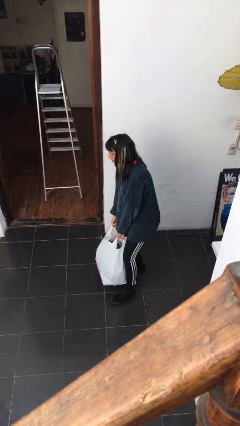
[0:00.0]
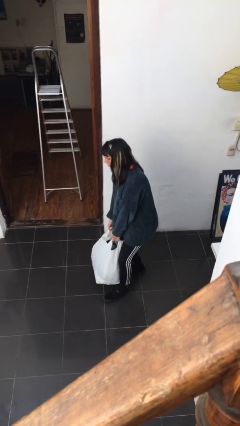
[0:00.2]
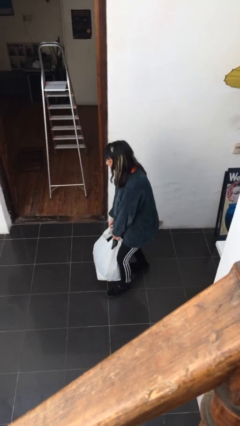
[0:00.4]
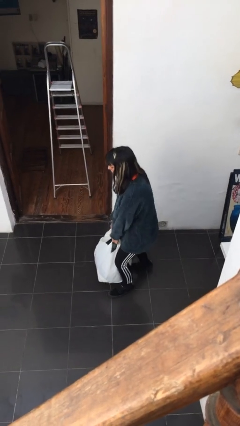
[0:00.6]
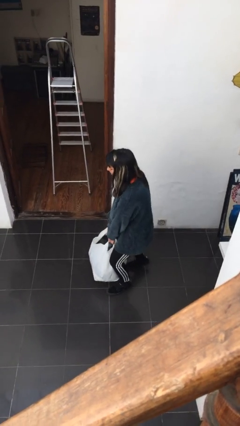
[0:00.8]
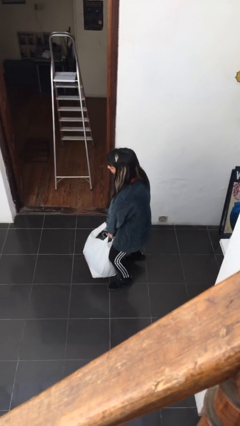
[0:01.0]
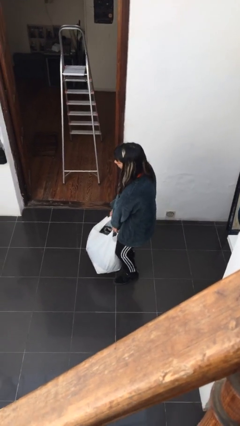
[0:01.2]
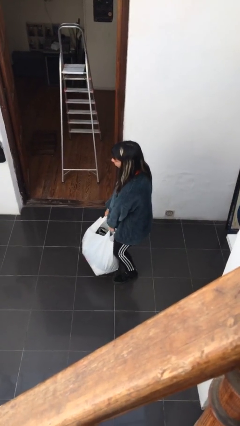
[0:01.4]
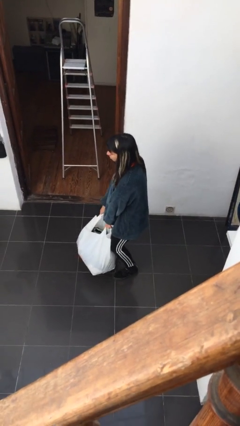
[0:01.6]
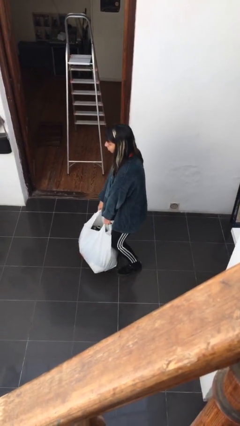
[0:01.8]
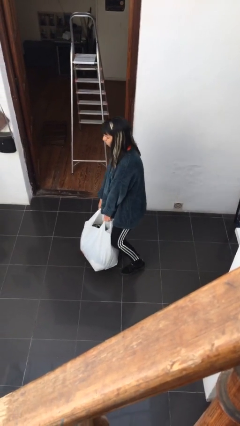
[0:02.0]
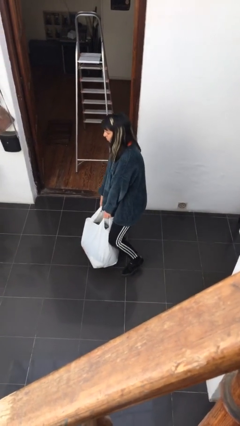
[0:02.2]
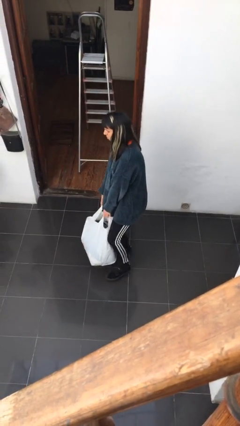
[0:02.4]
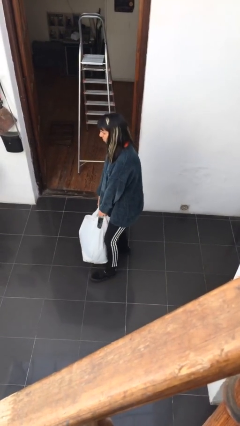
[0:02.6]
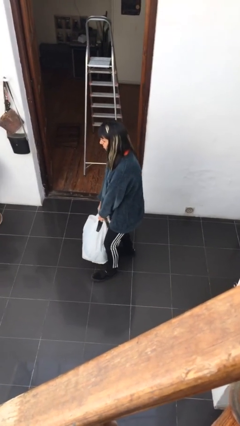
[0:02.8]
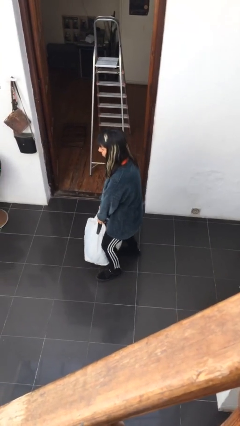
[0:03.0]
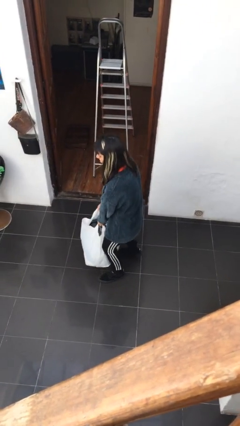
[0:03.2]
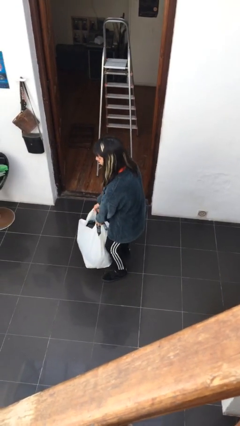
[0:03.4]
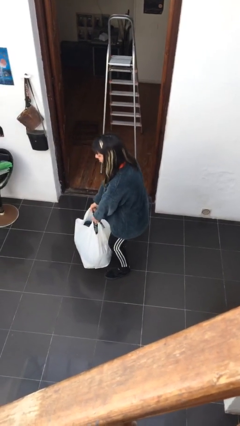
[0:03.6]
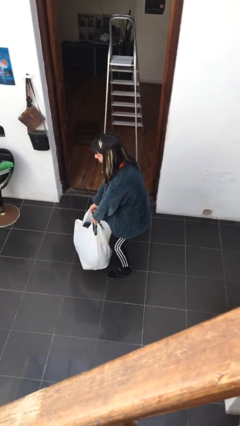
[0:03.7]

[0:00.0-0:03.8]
person carries heavy object

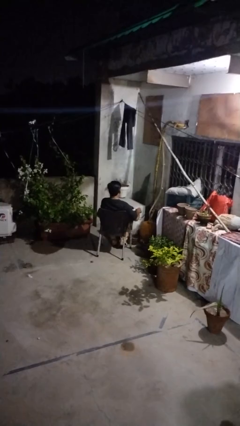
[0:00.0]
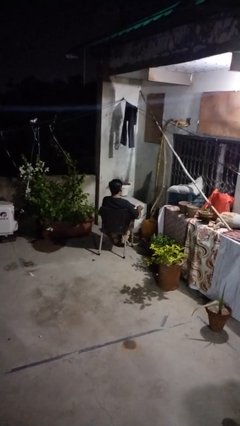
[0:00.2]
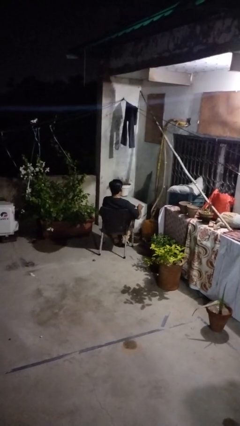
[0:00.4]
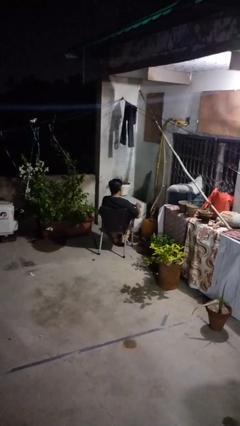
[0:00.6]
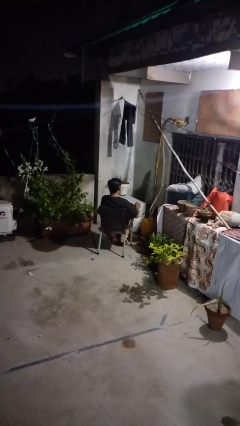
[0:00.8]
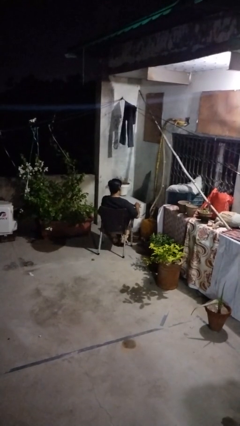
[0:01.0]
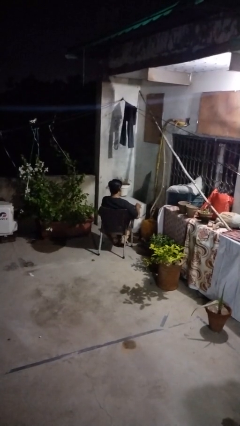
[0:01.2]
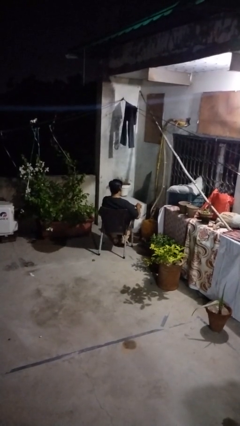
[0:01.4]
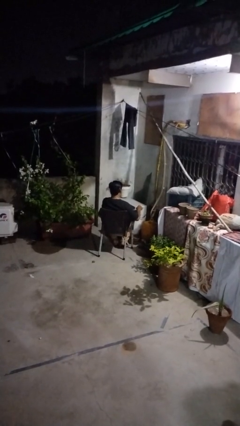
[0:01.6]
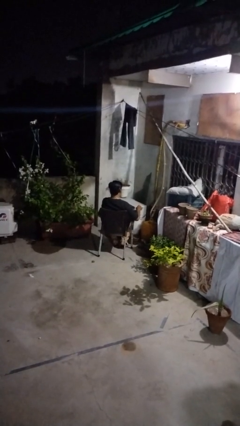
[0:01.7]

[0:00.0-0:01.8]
person stirs mug

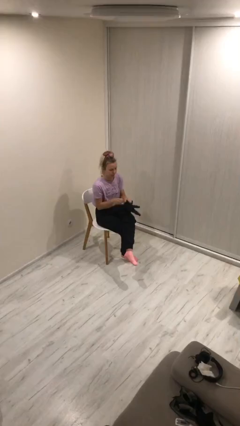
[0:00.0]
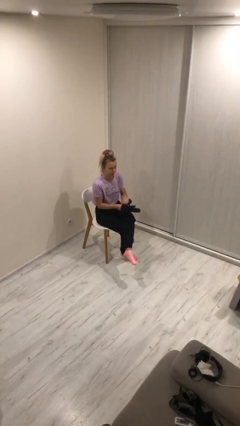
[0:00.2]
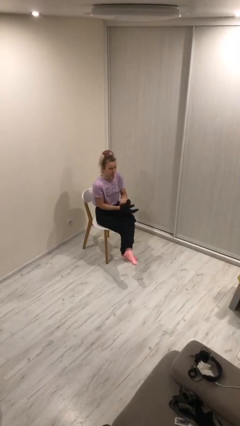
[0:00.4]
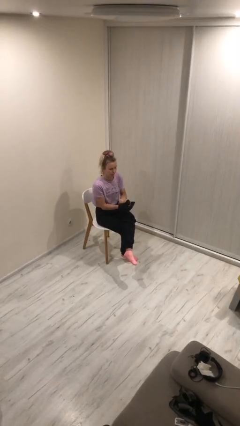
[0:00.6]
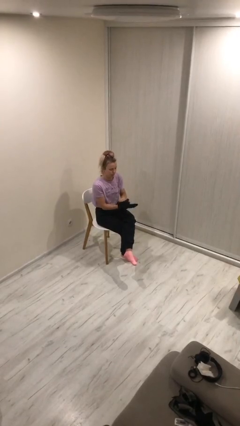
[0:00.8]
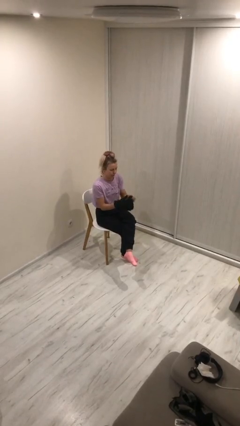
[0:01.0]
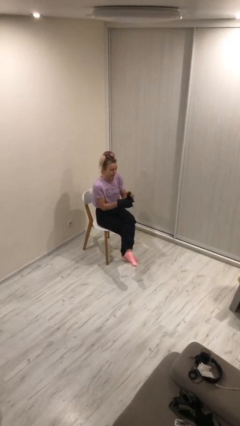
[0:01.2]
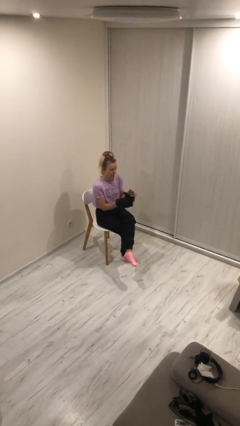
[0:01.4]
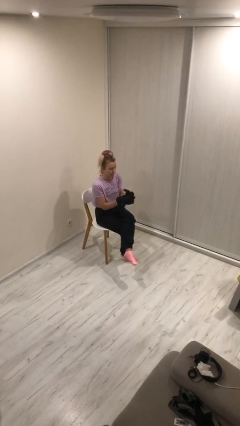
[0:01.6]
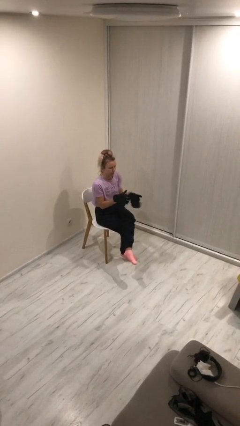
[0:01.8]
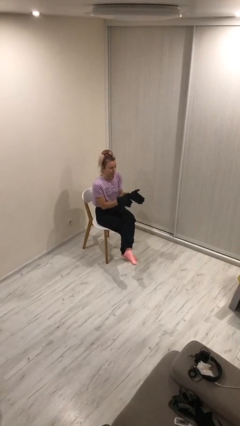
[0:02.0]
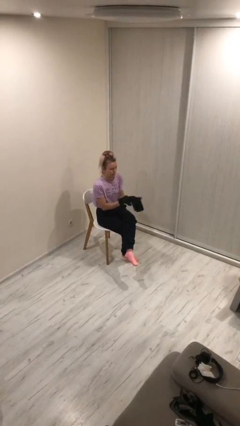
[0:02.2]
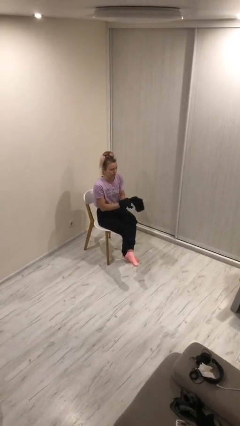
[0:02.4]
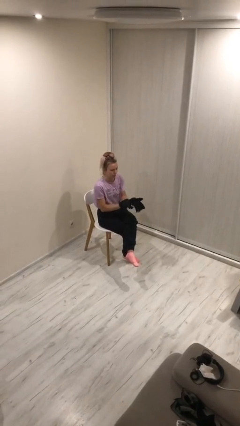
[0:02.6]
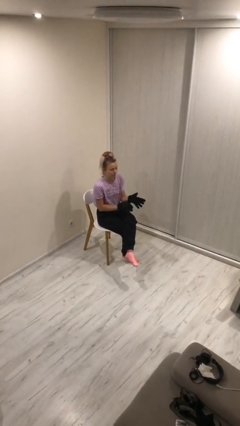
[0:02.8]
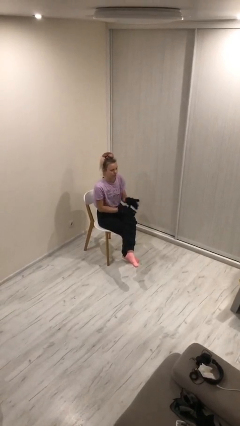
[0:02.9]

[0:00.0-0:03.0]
person puts on gloves

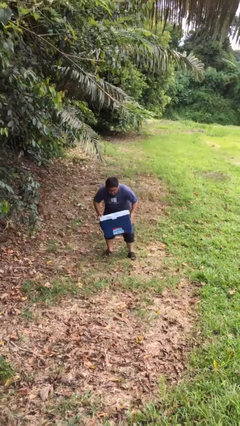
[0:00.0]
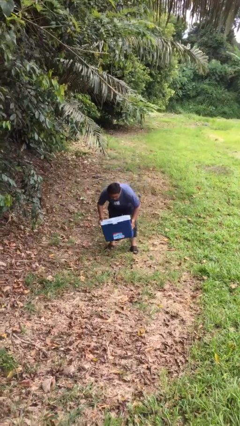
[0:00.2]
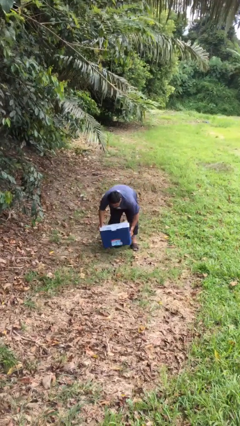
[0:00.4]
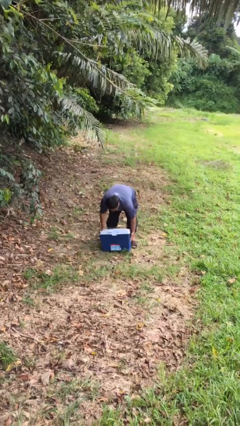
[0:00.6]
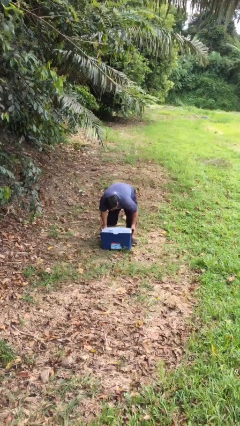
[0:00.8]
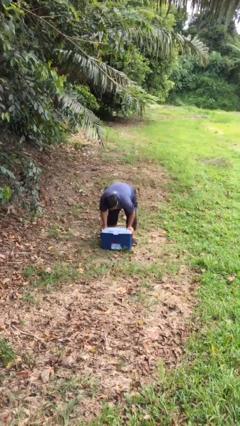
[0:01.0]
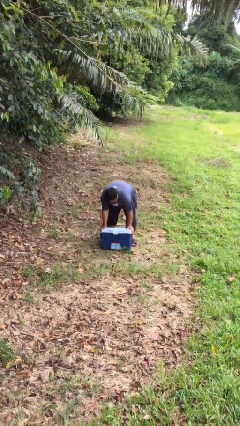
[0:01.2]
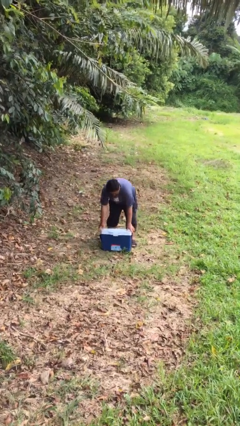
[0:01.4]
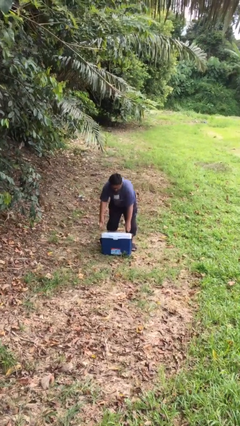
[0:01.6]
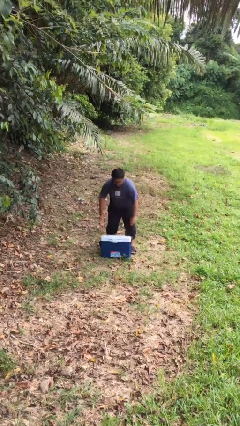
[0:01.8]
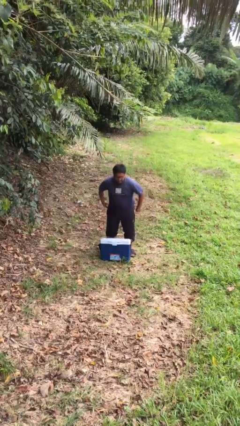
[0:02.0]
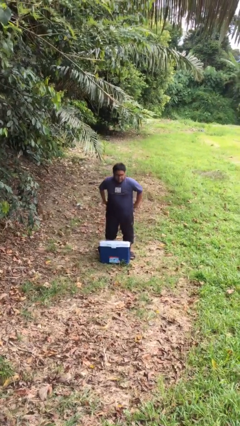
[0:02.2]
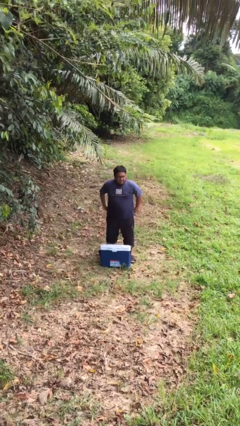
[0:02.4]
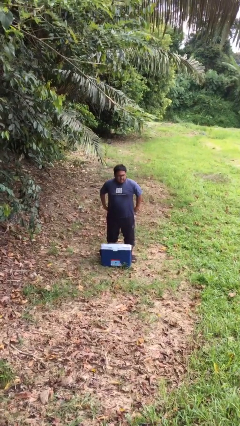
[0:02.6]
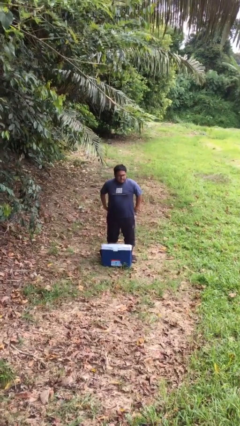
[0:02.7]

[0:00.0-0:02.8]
person puts down object on floor

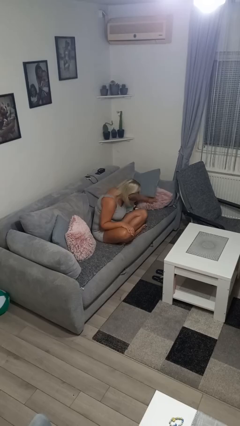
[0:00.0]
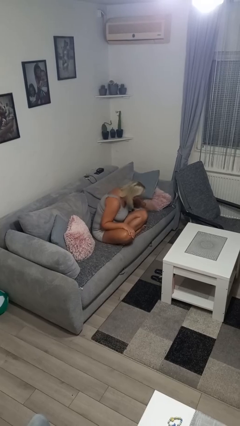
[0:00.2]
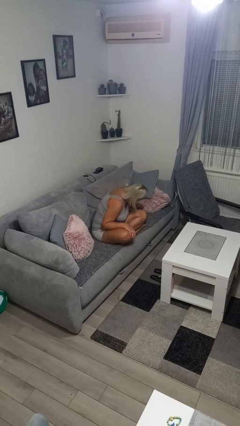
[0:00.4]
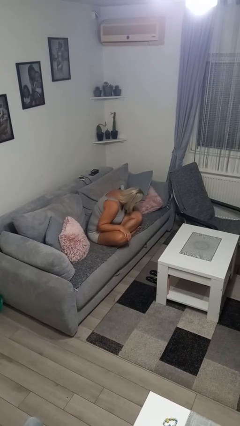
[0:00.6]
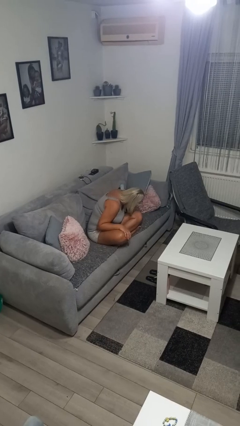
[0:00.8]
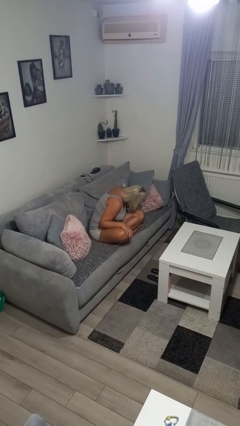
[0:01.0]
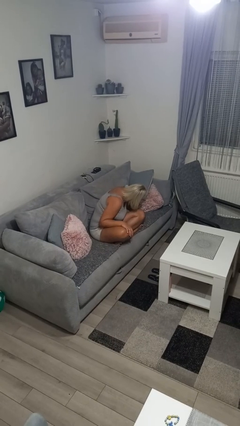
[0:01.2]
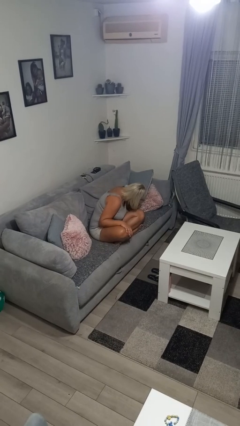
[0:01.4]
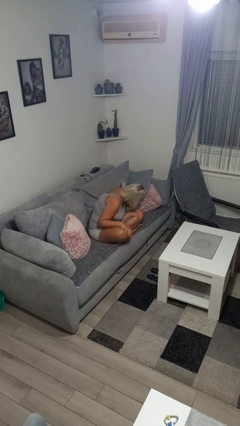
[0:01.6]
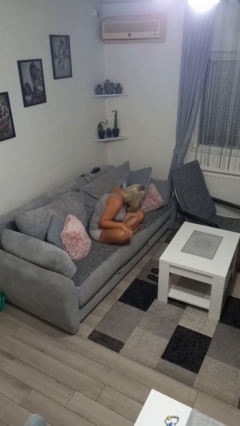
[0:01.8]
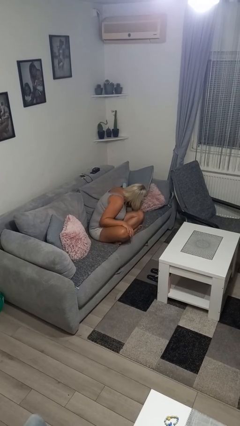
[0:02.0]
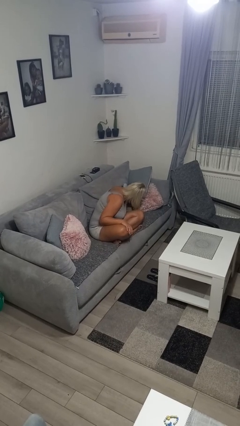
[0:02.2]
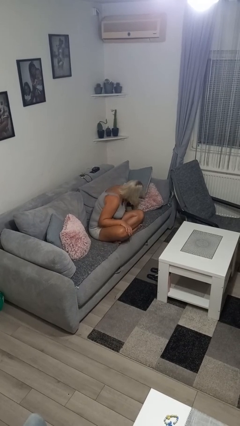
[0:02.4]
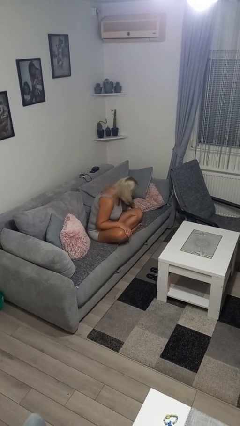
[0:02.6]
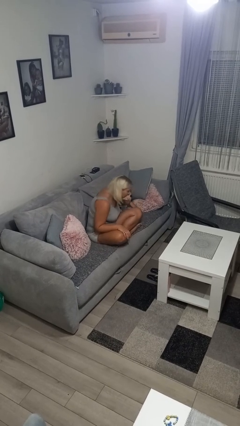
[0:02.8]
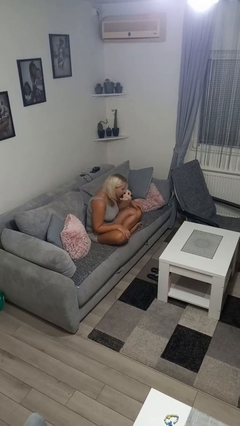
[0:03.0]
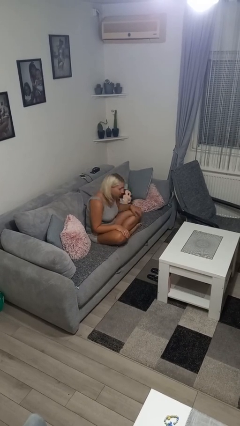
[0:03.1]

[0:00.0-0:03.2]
person searches in couch

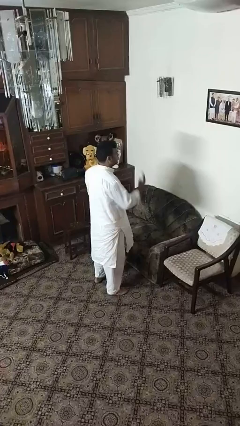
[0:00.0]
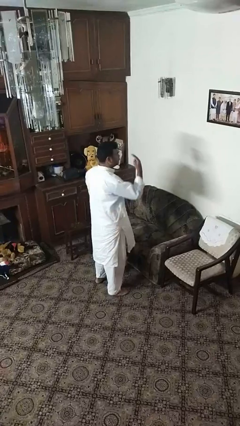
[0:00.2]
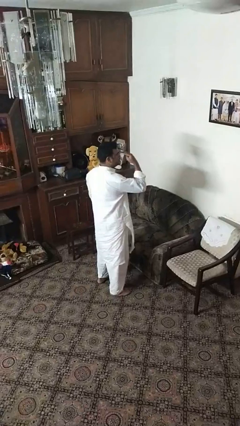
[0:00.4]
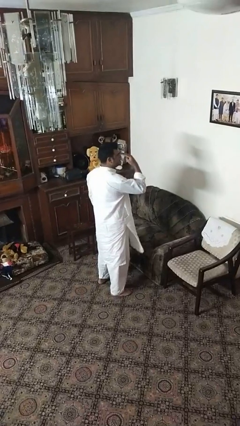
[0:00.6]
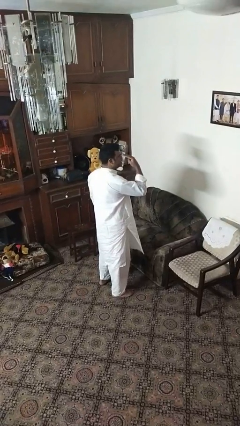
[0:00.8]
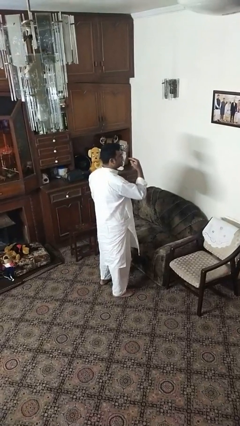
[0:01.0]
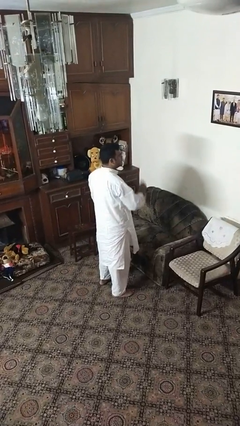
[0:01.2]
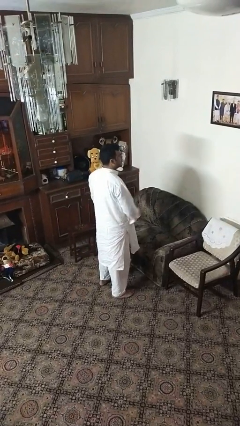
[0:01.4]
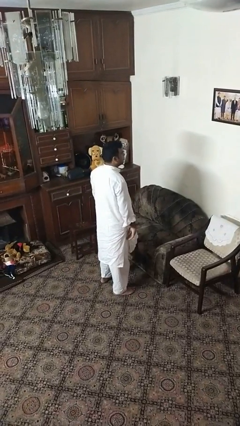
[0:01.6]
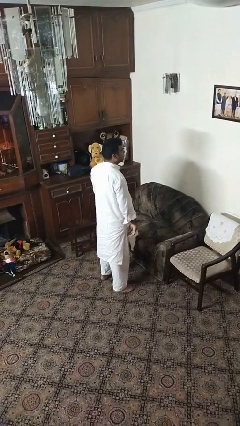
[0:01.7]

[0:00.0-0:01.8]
person gestures watch closely

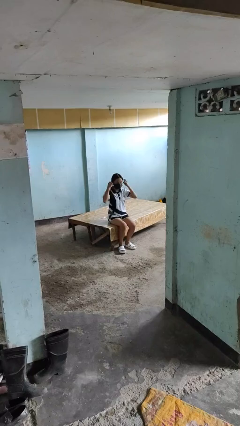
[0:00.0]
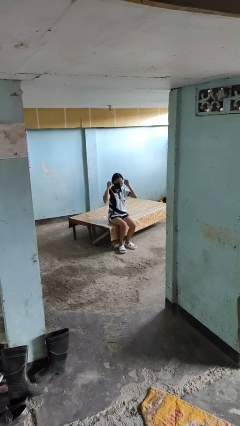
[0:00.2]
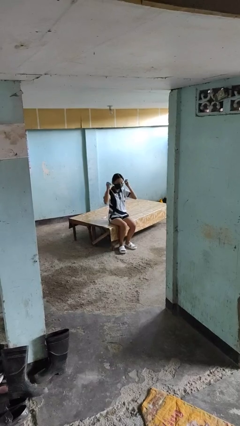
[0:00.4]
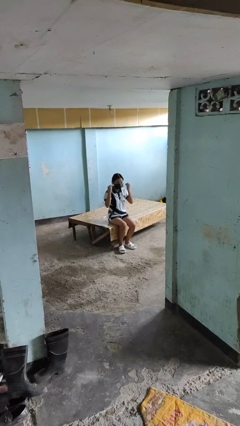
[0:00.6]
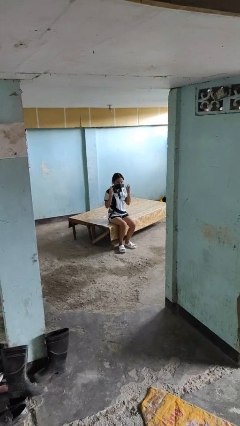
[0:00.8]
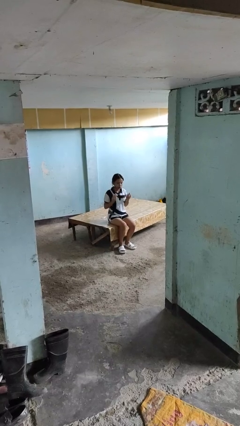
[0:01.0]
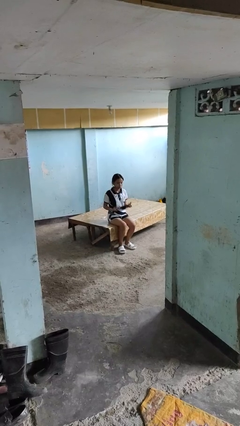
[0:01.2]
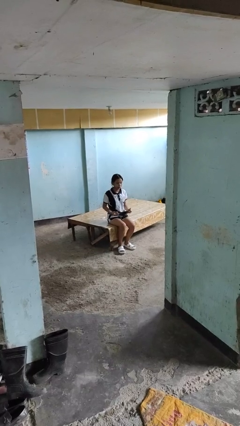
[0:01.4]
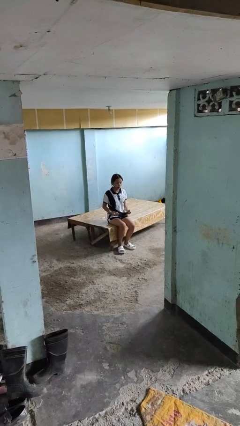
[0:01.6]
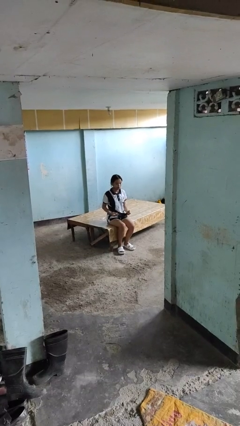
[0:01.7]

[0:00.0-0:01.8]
person takes off facemask
